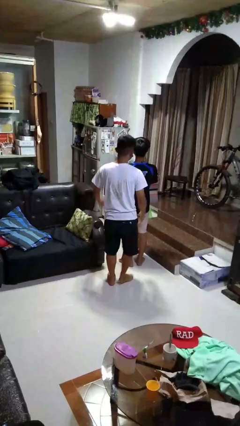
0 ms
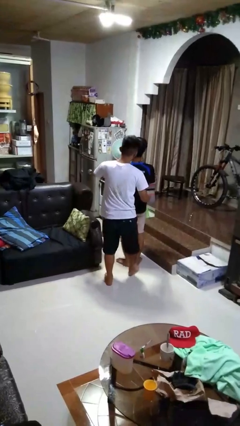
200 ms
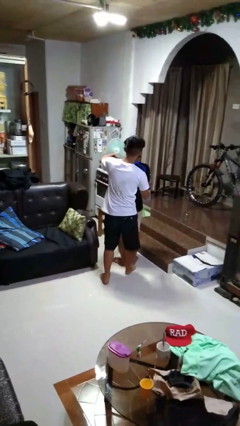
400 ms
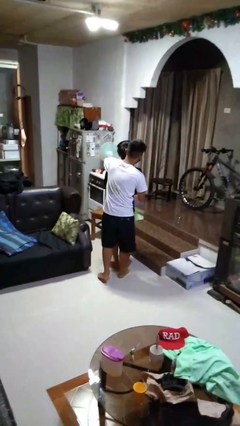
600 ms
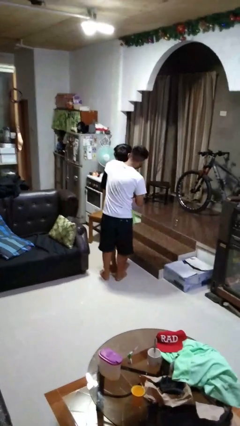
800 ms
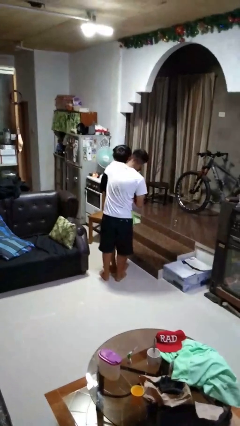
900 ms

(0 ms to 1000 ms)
person hugs person from behind

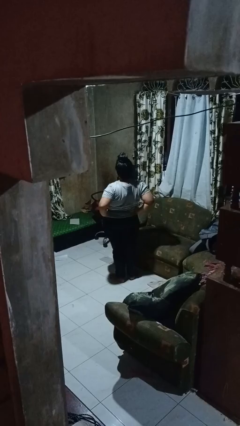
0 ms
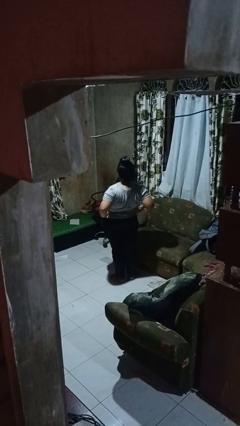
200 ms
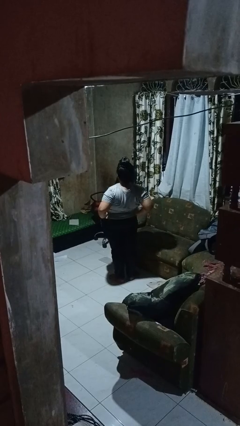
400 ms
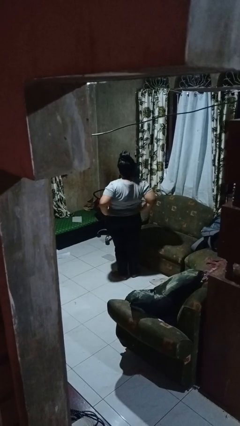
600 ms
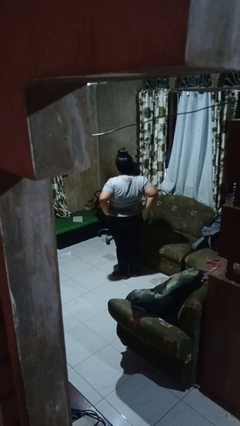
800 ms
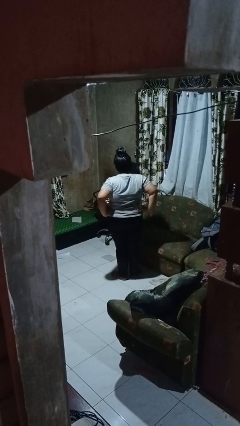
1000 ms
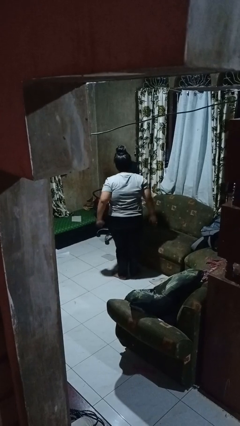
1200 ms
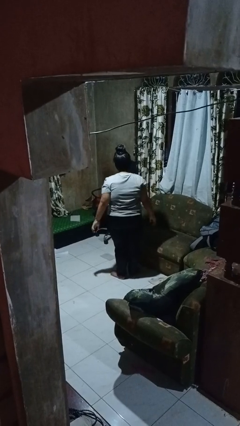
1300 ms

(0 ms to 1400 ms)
person stretches back

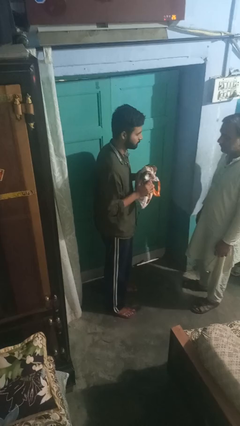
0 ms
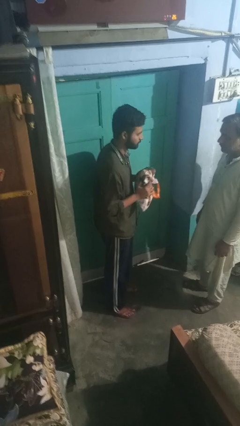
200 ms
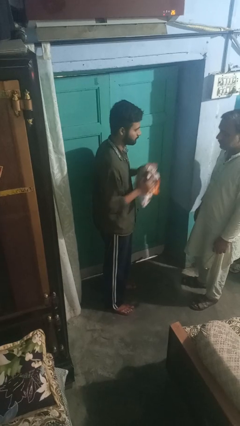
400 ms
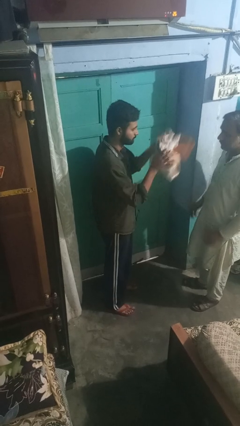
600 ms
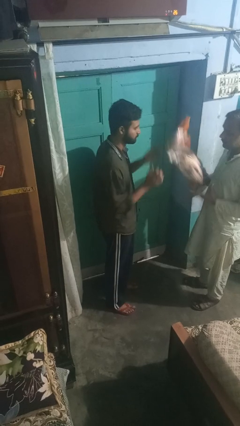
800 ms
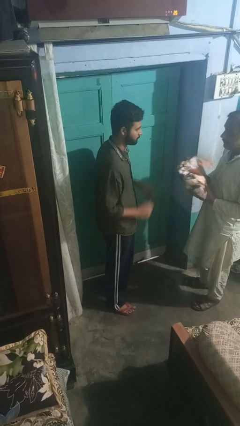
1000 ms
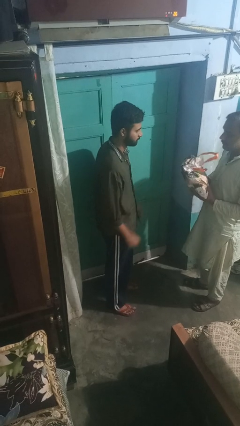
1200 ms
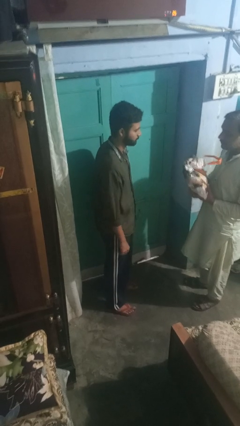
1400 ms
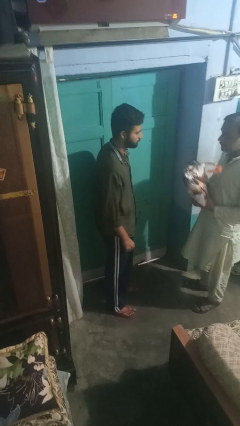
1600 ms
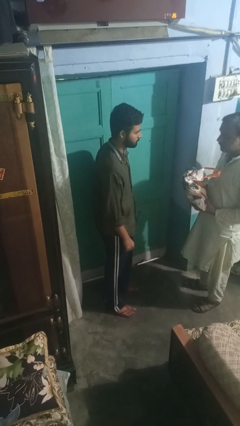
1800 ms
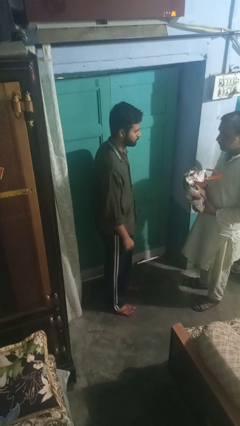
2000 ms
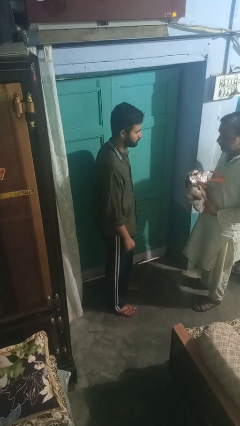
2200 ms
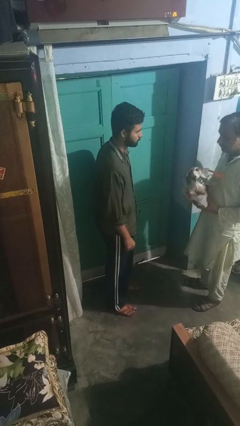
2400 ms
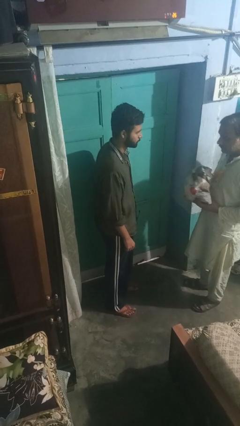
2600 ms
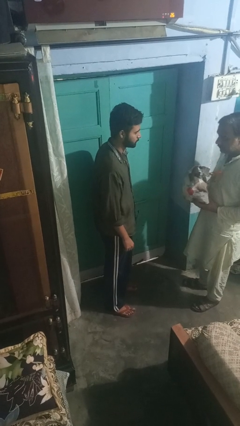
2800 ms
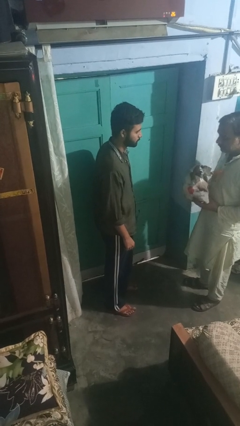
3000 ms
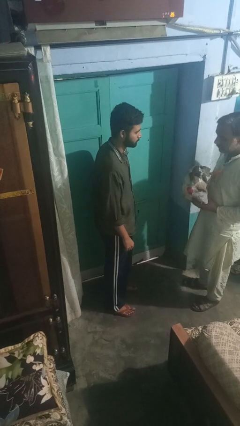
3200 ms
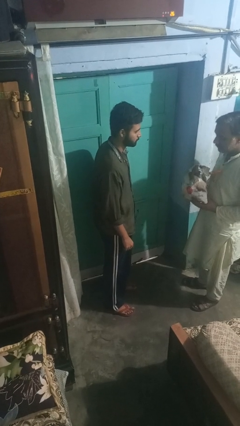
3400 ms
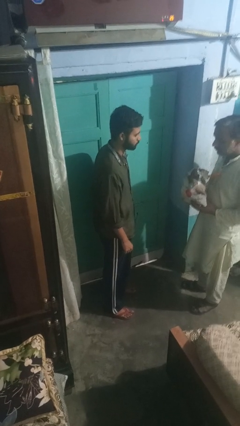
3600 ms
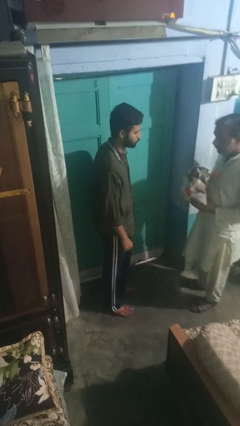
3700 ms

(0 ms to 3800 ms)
person throws object to person

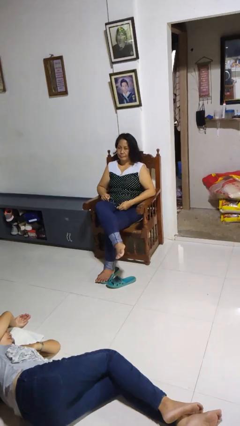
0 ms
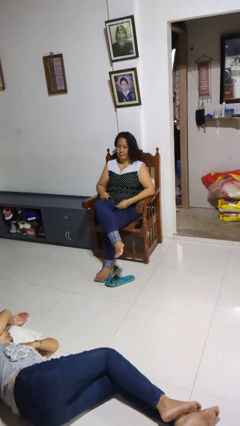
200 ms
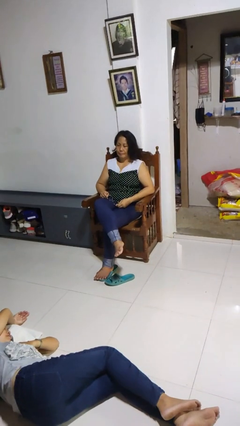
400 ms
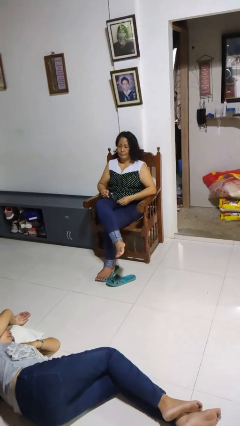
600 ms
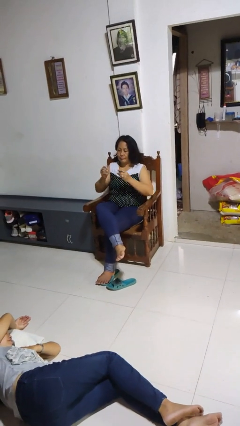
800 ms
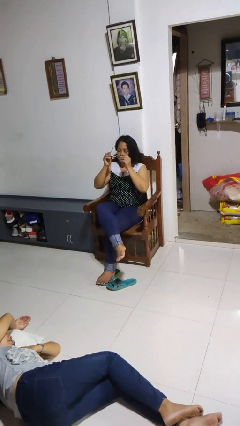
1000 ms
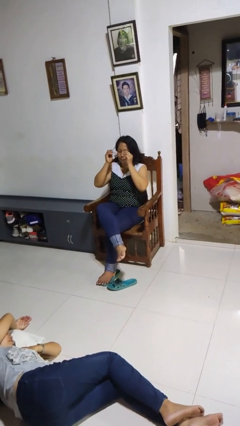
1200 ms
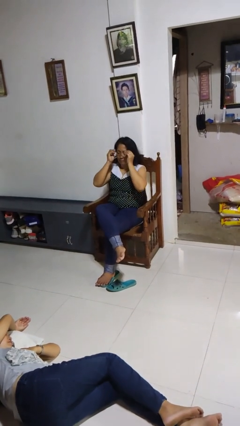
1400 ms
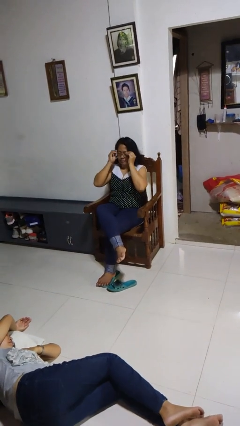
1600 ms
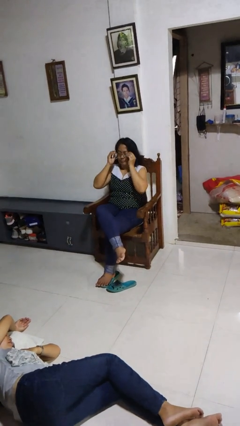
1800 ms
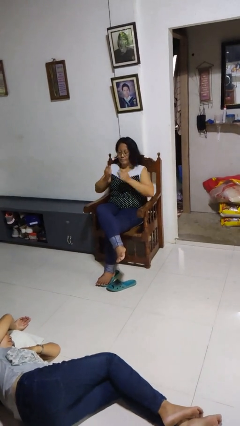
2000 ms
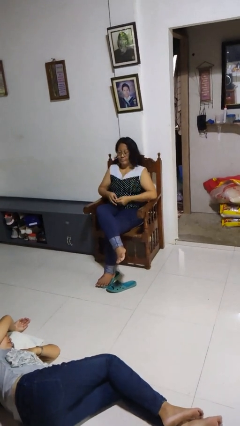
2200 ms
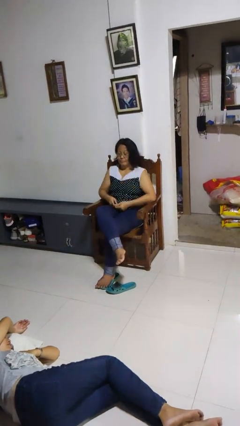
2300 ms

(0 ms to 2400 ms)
person puts on glasses

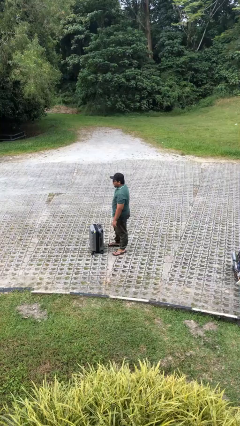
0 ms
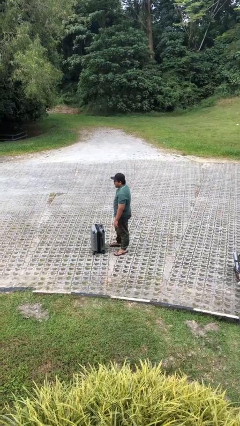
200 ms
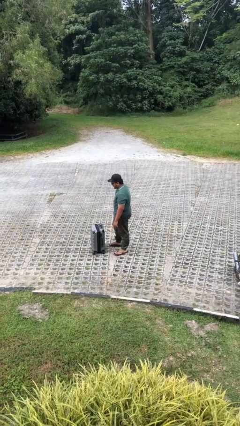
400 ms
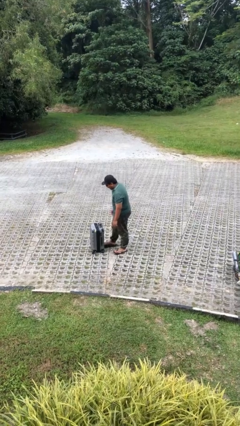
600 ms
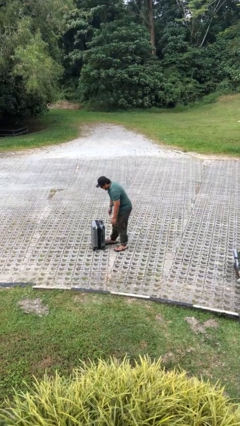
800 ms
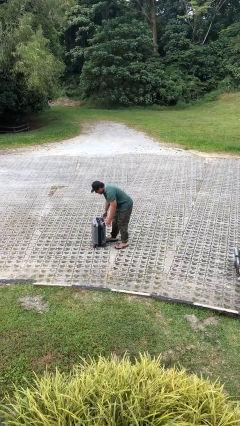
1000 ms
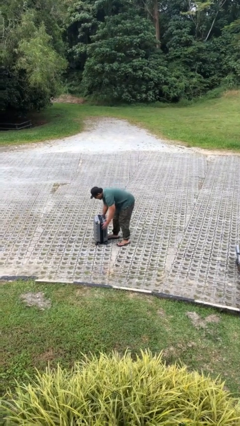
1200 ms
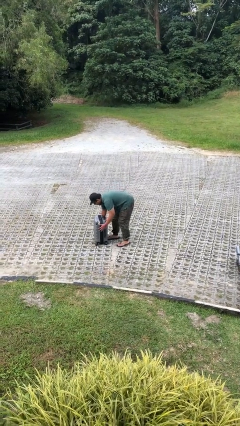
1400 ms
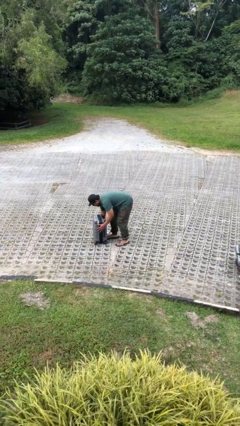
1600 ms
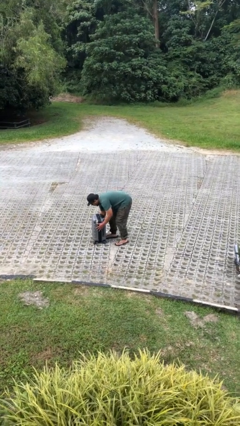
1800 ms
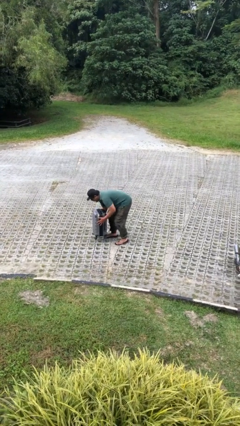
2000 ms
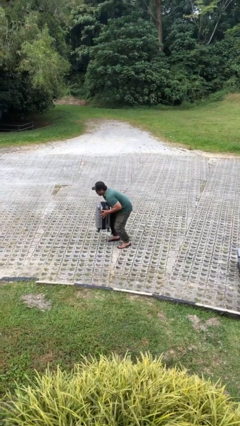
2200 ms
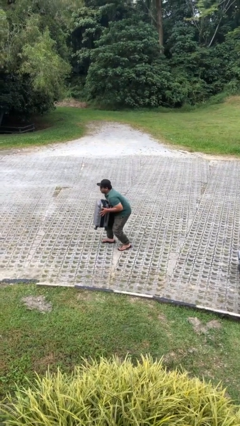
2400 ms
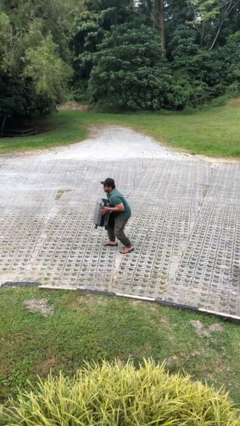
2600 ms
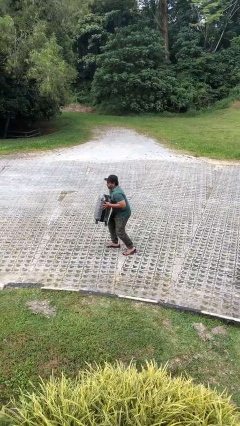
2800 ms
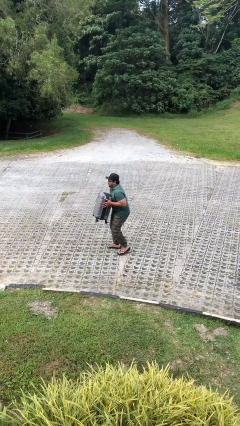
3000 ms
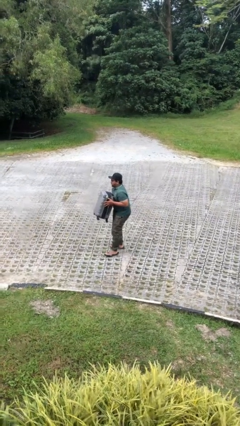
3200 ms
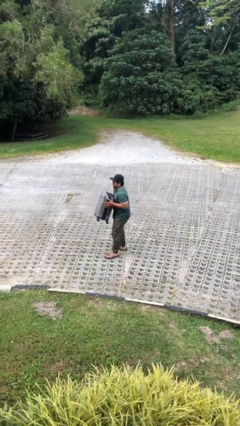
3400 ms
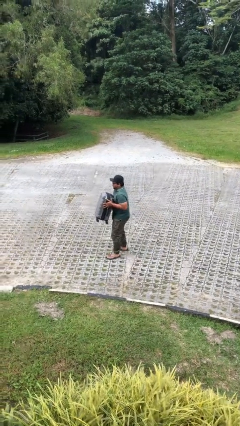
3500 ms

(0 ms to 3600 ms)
person picks up object from floor

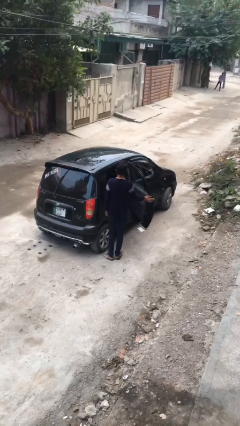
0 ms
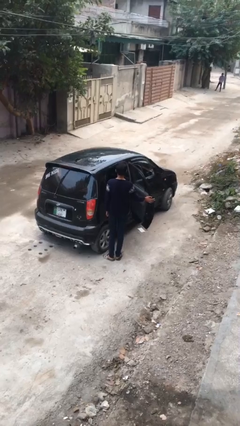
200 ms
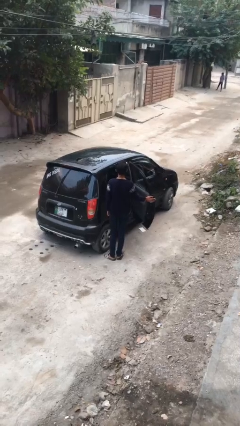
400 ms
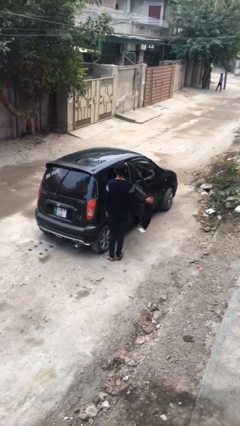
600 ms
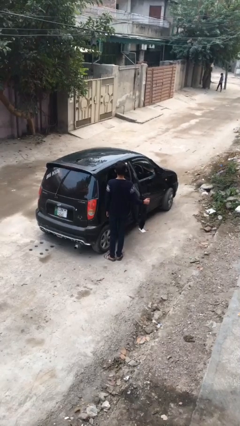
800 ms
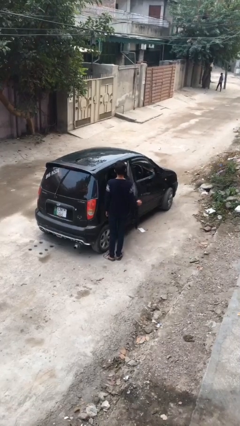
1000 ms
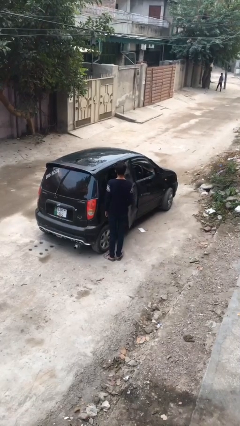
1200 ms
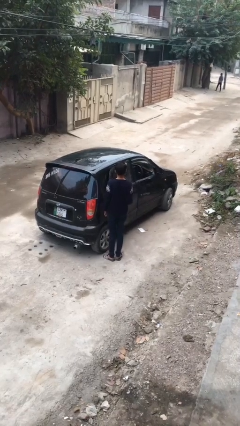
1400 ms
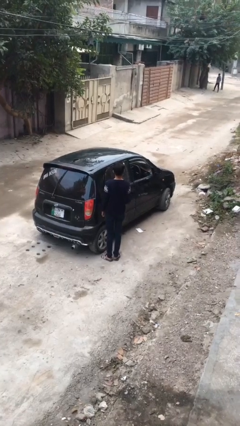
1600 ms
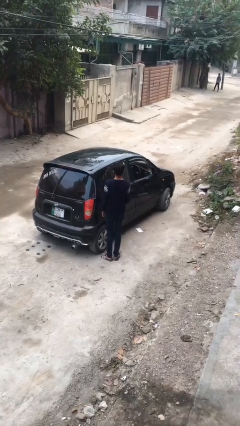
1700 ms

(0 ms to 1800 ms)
person closes car door

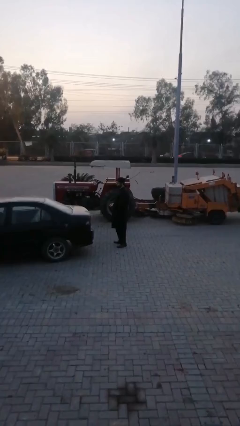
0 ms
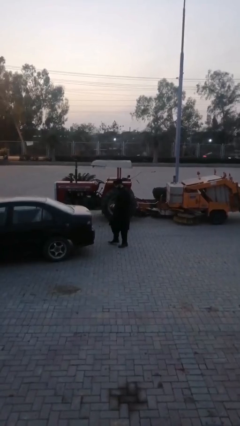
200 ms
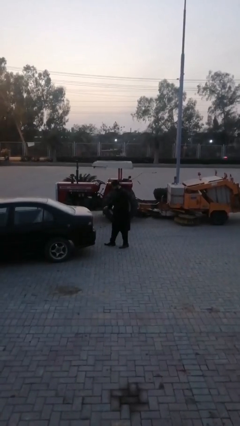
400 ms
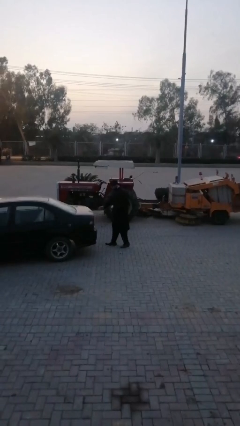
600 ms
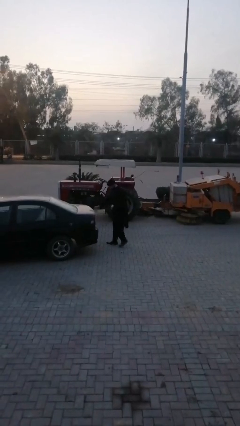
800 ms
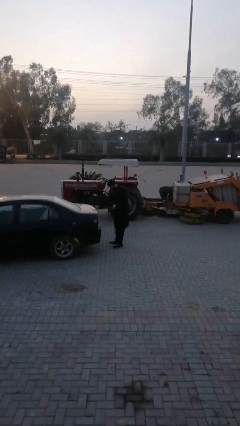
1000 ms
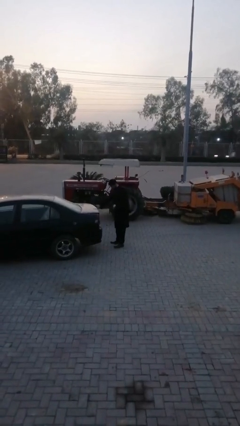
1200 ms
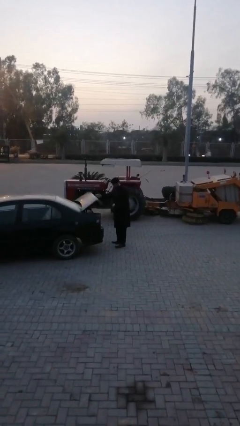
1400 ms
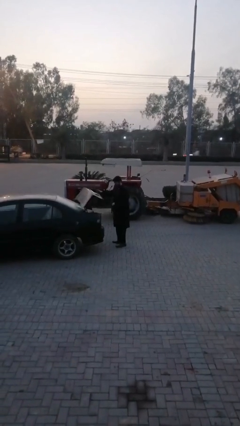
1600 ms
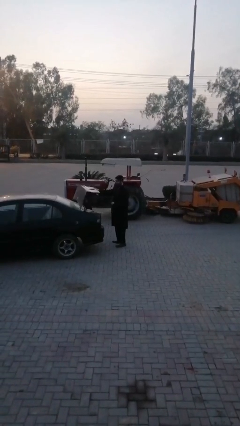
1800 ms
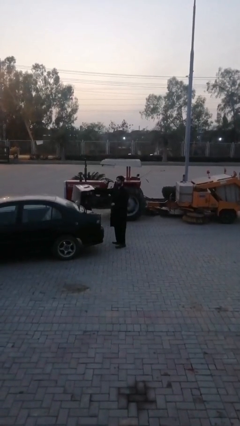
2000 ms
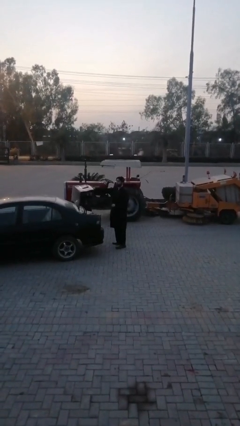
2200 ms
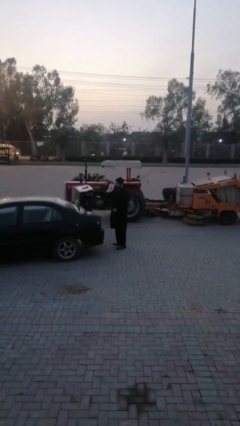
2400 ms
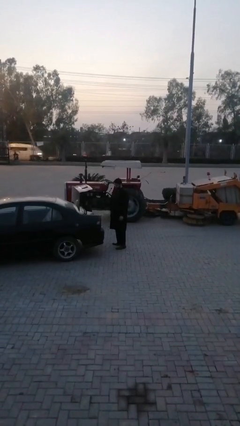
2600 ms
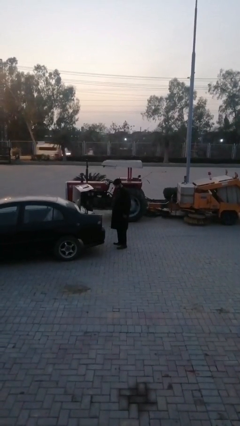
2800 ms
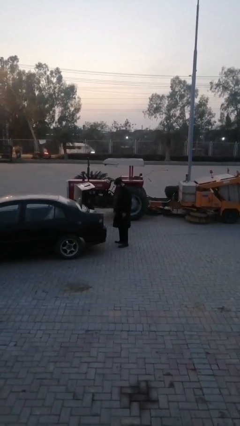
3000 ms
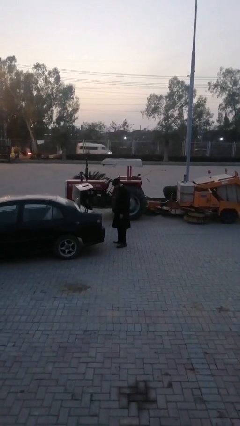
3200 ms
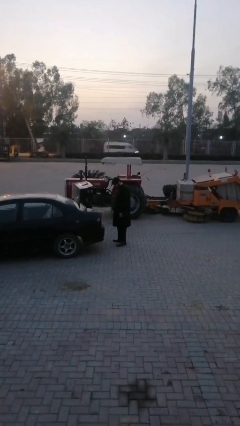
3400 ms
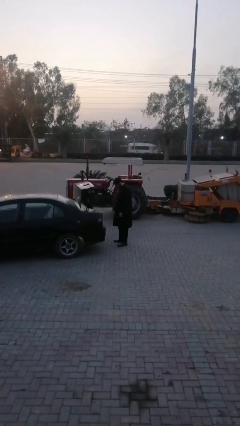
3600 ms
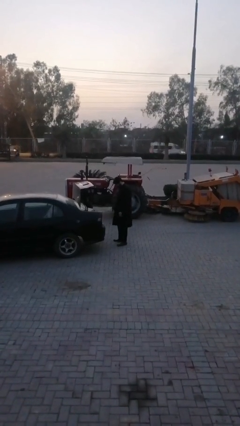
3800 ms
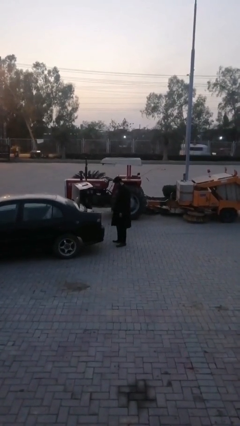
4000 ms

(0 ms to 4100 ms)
person opens car trunk
